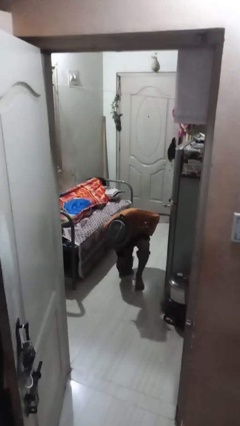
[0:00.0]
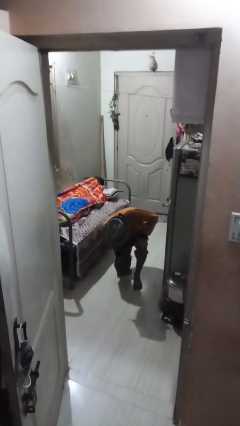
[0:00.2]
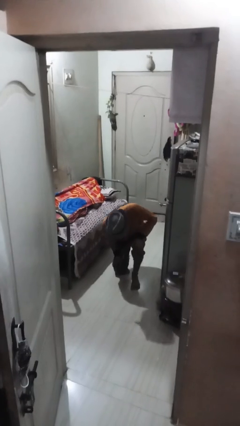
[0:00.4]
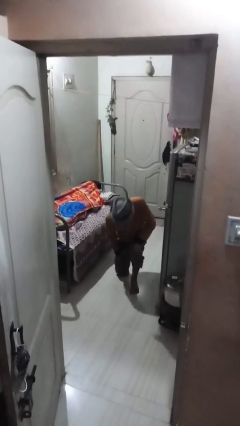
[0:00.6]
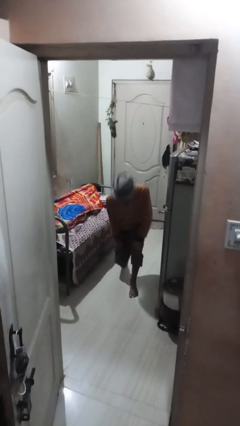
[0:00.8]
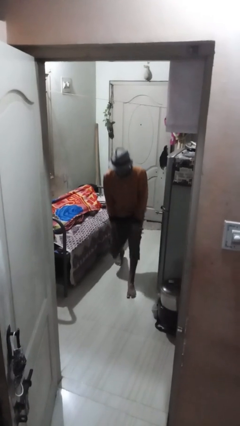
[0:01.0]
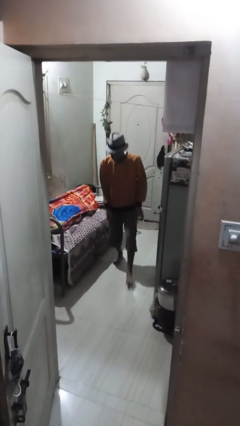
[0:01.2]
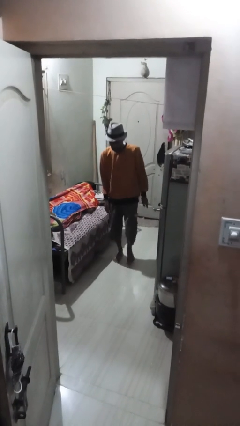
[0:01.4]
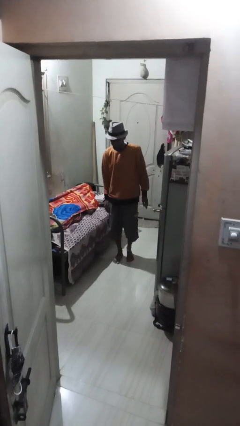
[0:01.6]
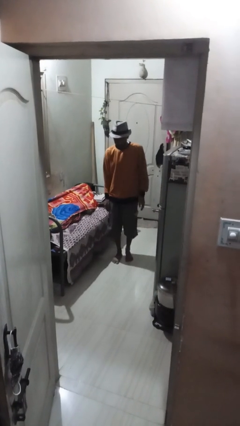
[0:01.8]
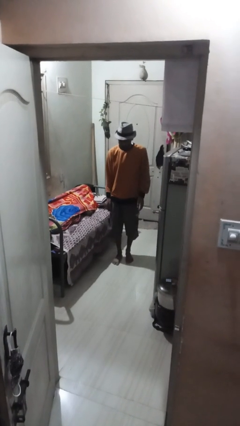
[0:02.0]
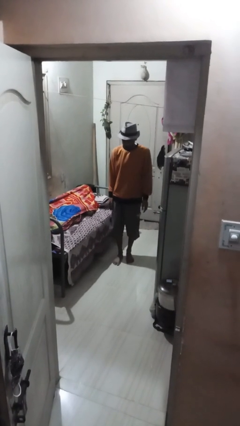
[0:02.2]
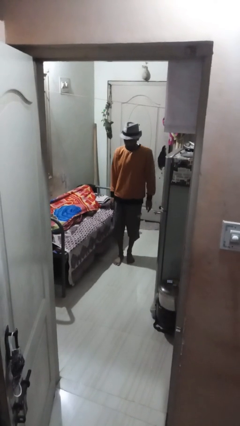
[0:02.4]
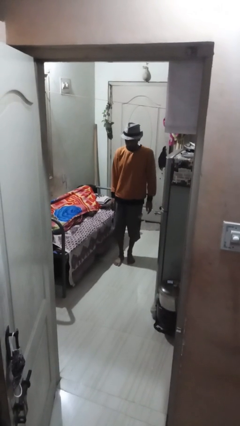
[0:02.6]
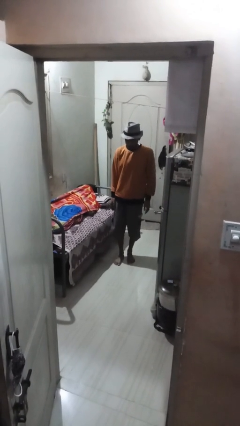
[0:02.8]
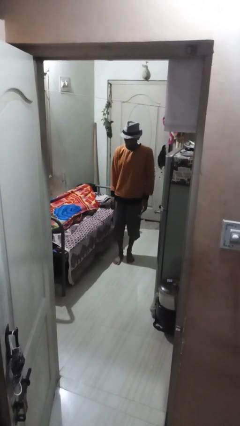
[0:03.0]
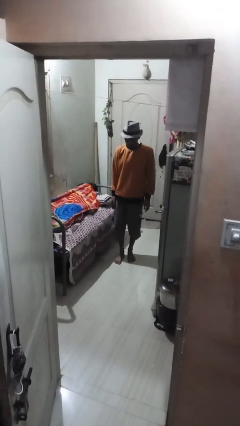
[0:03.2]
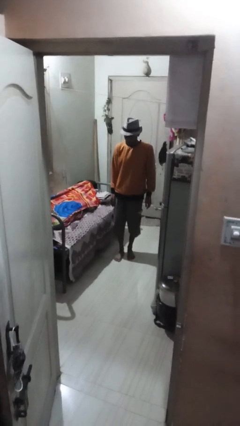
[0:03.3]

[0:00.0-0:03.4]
person stands up from floor

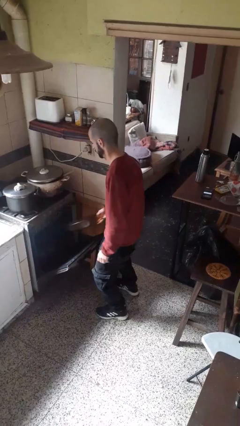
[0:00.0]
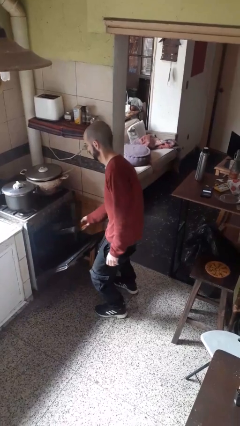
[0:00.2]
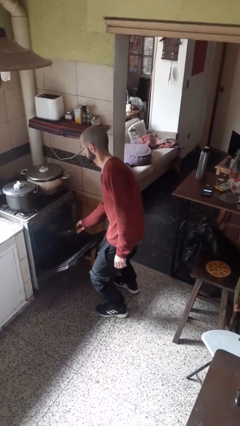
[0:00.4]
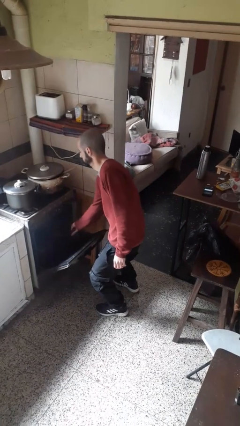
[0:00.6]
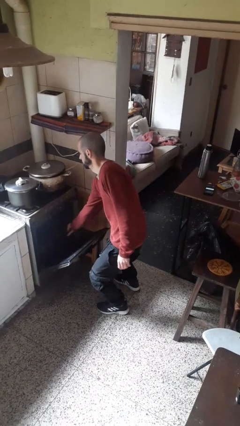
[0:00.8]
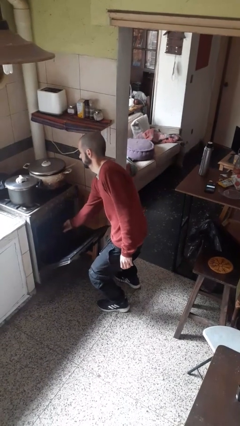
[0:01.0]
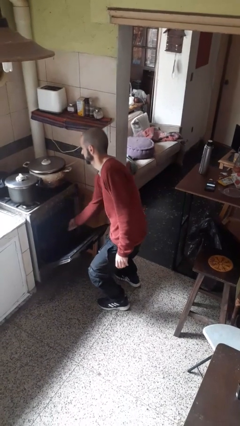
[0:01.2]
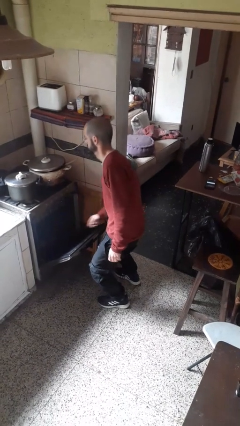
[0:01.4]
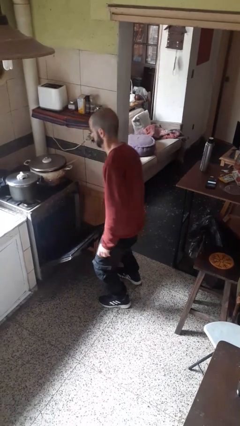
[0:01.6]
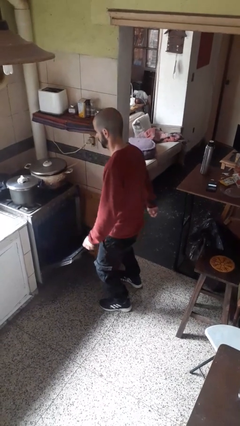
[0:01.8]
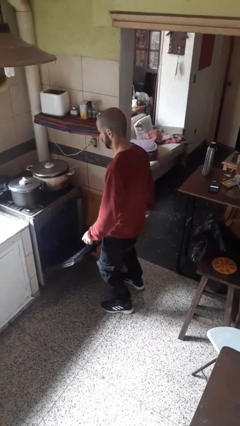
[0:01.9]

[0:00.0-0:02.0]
person puts object into oven

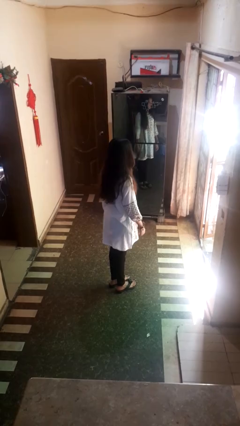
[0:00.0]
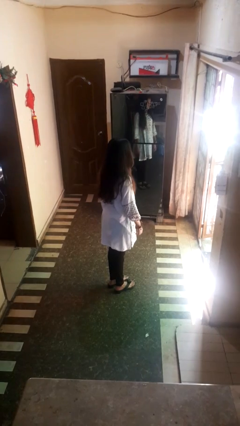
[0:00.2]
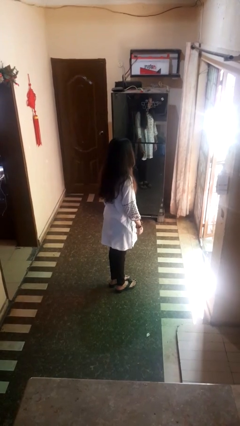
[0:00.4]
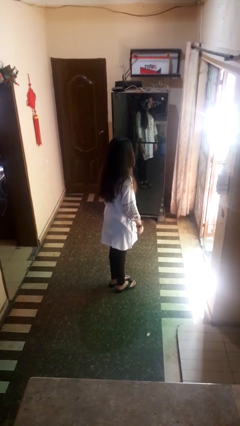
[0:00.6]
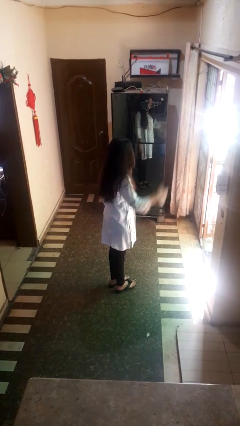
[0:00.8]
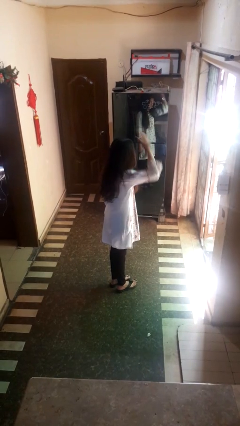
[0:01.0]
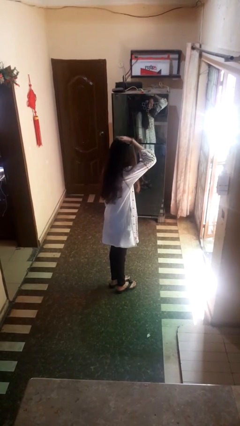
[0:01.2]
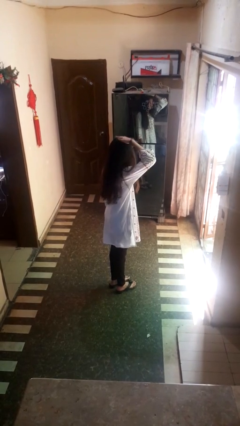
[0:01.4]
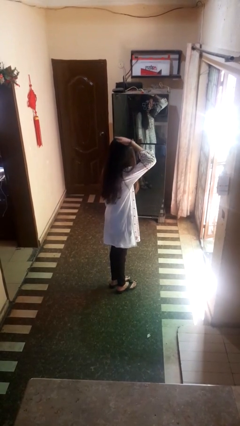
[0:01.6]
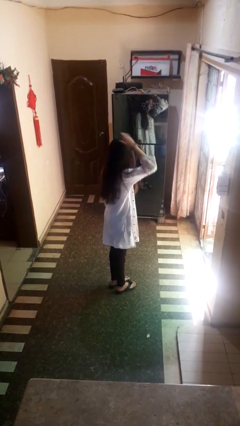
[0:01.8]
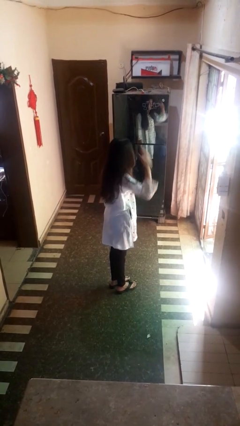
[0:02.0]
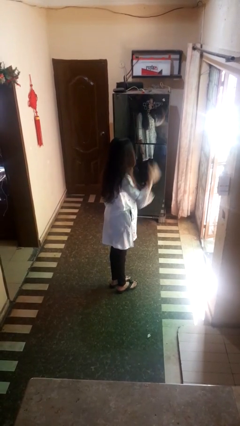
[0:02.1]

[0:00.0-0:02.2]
person pats head

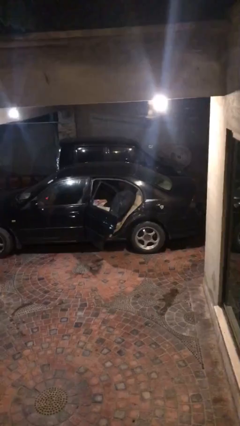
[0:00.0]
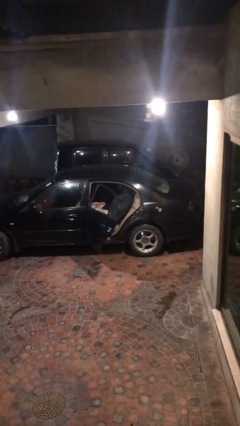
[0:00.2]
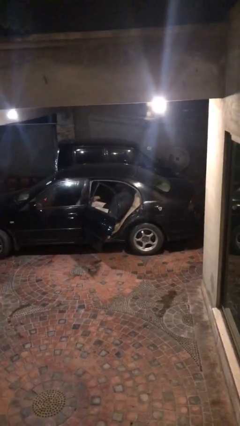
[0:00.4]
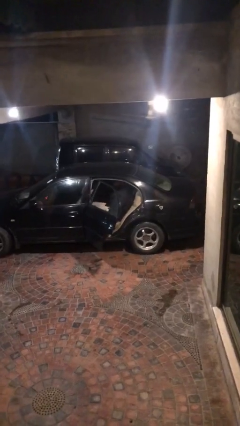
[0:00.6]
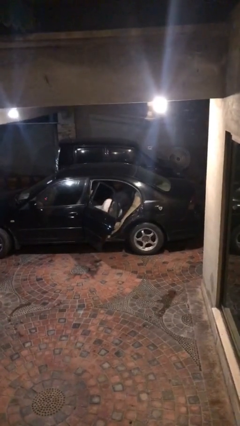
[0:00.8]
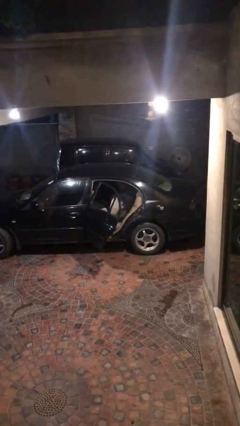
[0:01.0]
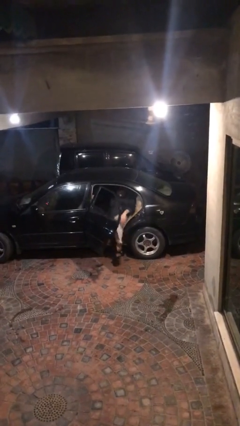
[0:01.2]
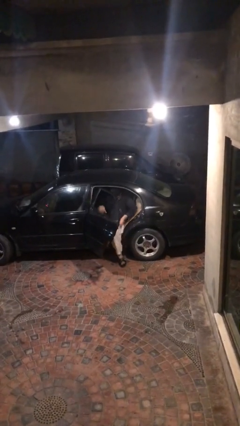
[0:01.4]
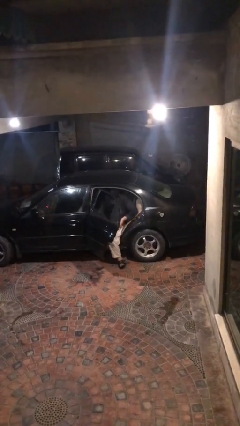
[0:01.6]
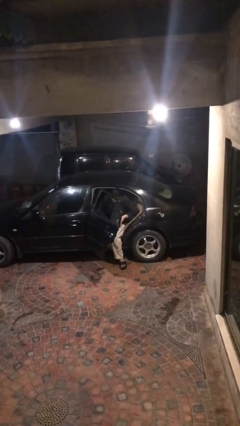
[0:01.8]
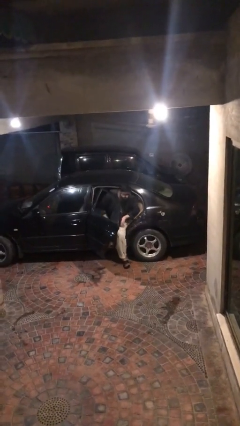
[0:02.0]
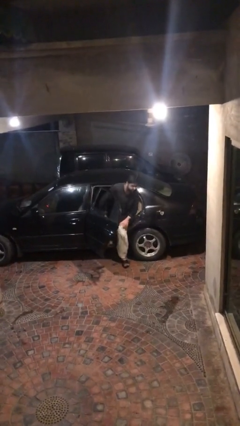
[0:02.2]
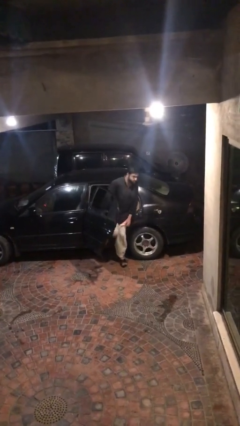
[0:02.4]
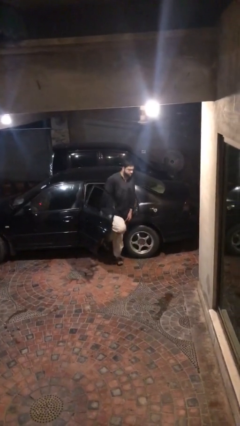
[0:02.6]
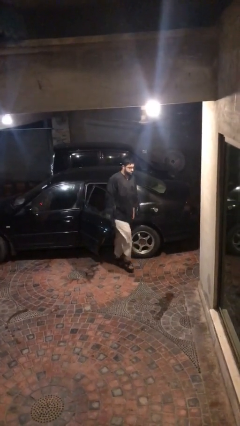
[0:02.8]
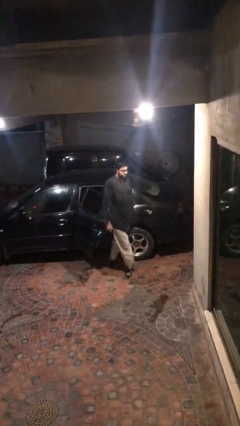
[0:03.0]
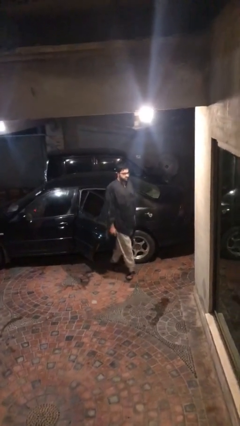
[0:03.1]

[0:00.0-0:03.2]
person exits car

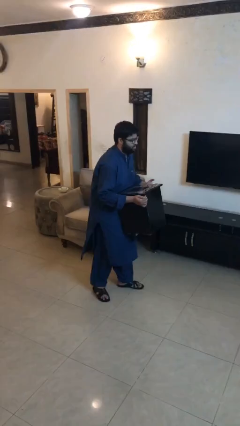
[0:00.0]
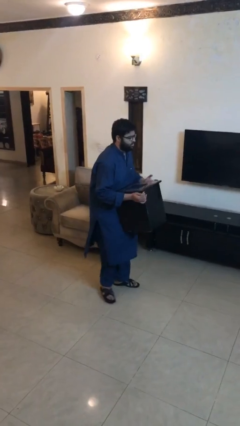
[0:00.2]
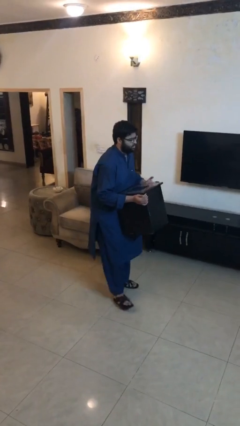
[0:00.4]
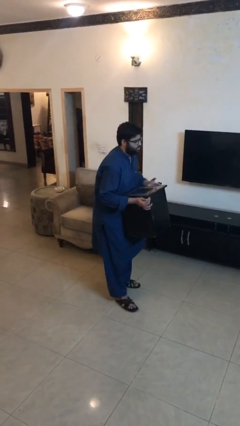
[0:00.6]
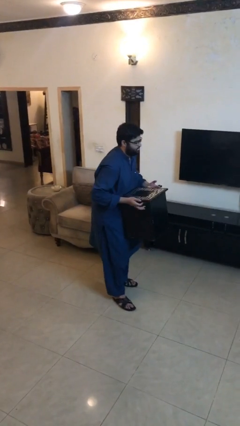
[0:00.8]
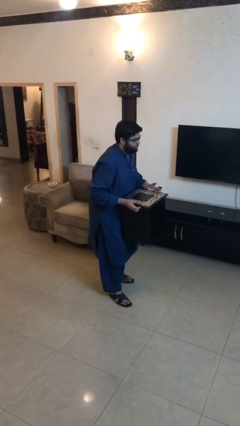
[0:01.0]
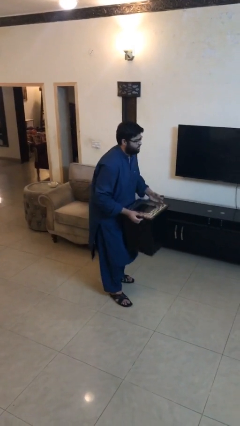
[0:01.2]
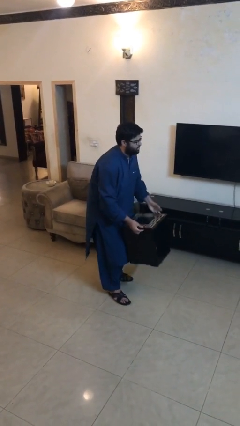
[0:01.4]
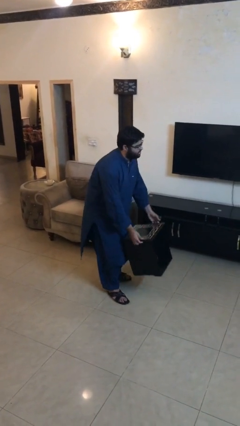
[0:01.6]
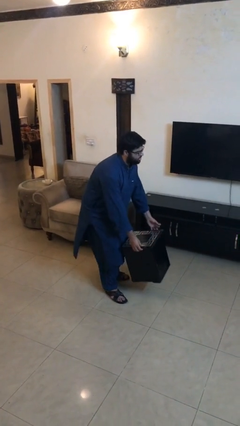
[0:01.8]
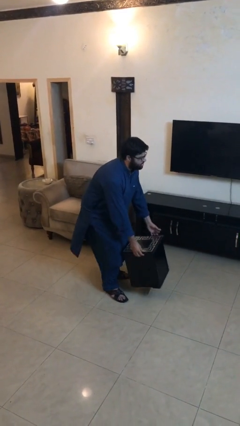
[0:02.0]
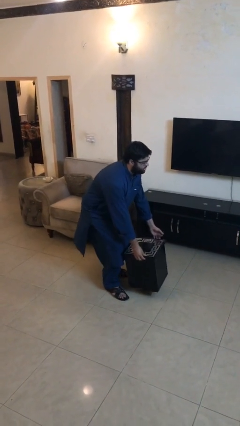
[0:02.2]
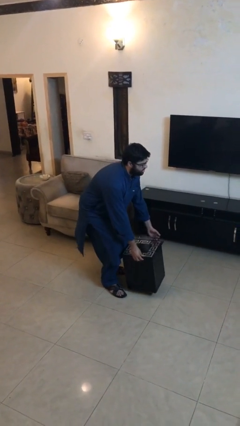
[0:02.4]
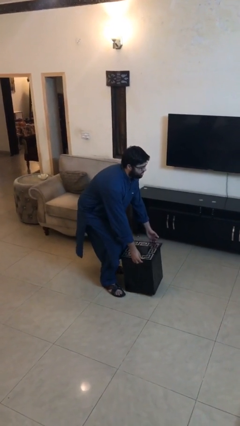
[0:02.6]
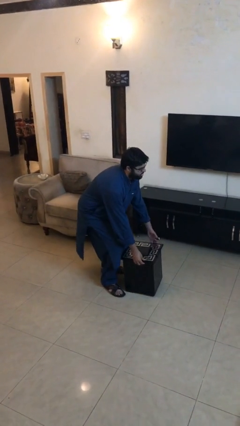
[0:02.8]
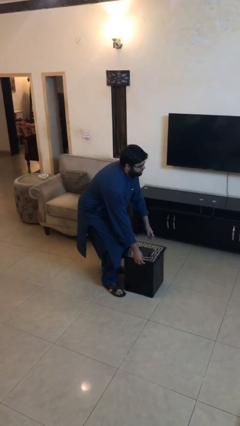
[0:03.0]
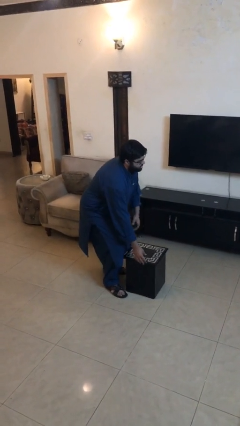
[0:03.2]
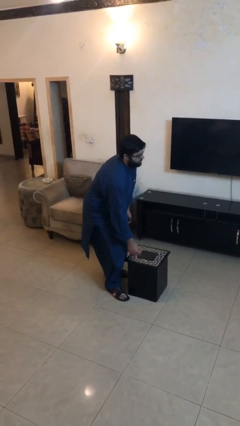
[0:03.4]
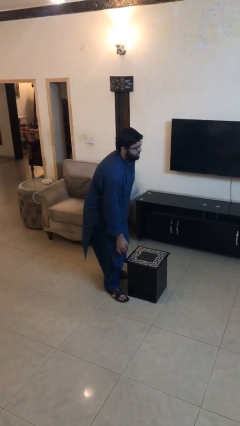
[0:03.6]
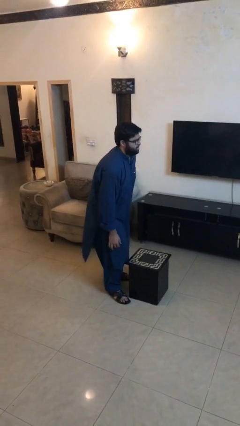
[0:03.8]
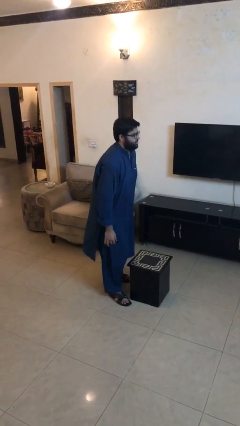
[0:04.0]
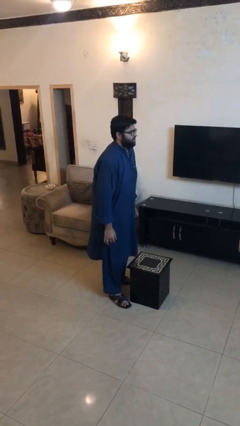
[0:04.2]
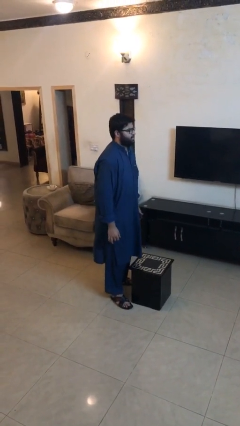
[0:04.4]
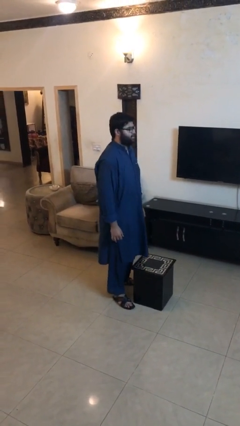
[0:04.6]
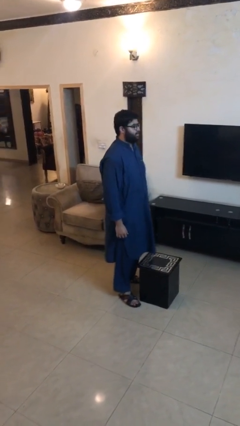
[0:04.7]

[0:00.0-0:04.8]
person puts down object on floor

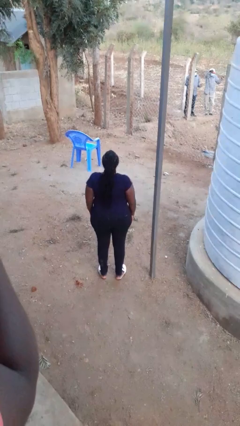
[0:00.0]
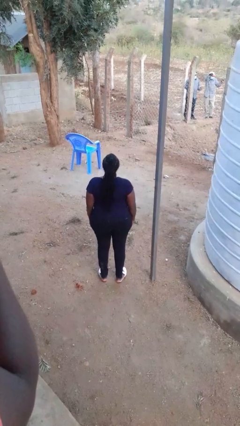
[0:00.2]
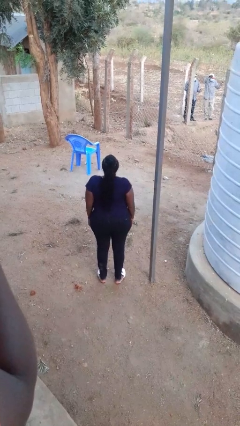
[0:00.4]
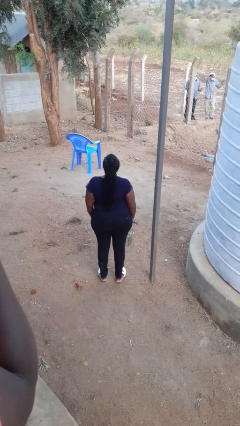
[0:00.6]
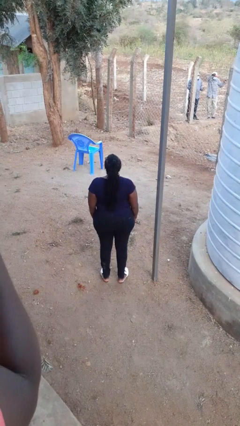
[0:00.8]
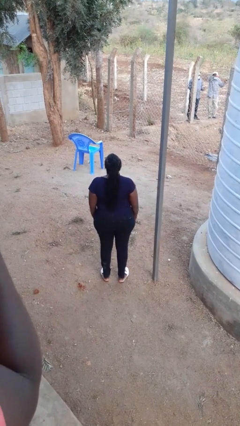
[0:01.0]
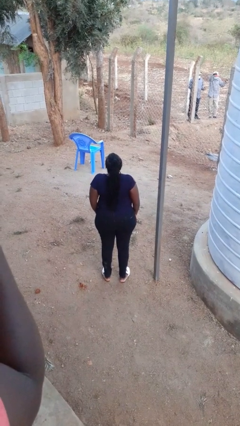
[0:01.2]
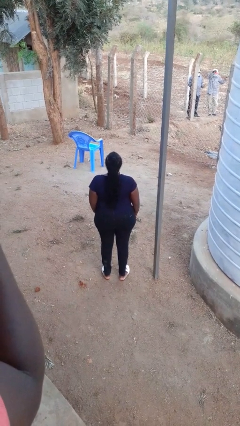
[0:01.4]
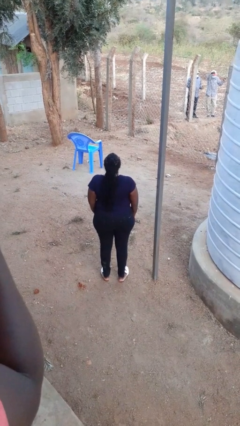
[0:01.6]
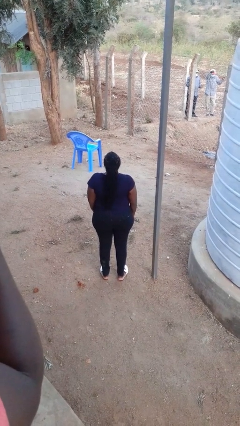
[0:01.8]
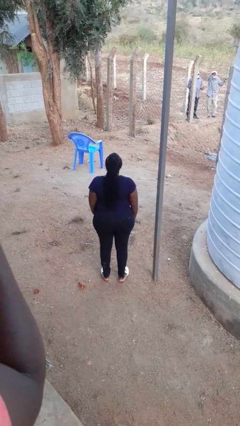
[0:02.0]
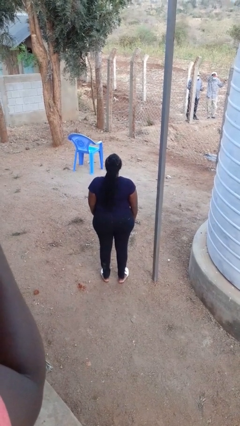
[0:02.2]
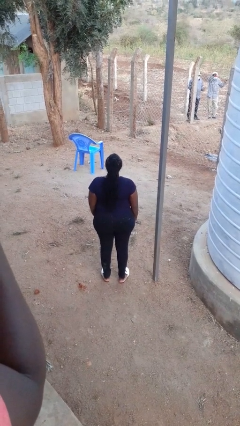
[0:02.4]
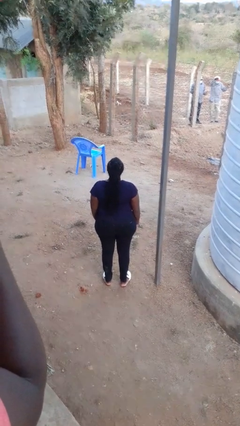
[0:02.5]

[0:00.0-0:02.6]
person shrugs
